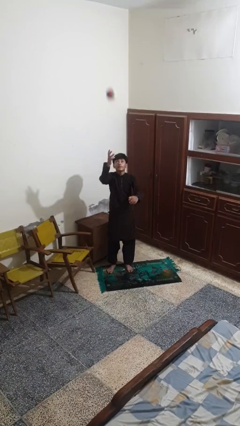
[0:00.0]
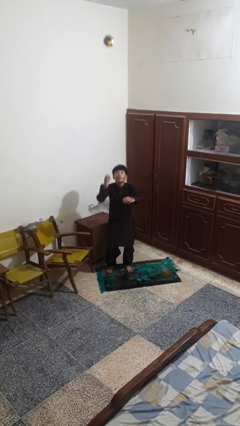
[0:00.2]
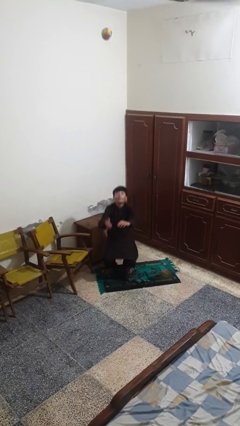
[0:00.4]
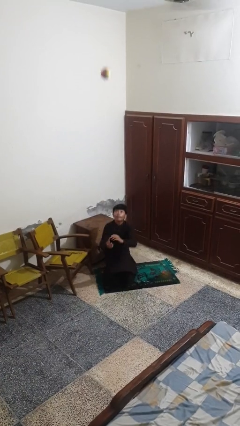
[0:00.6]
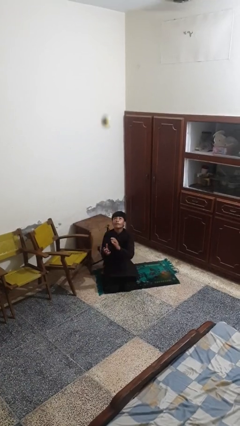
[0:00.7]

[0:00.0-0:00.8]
person drops object

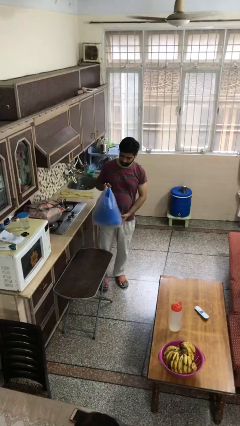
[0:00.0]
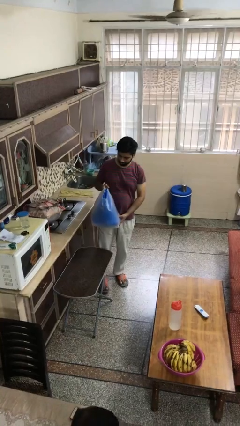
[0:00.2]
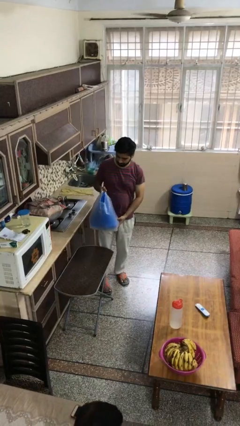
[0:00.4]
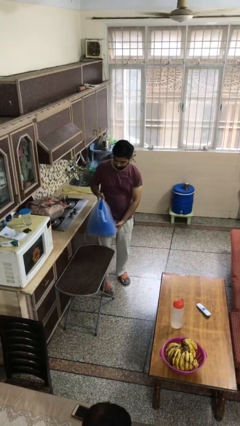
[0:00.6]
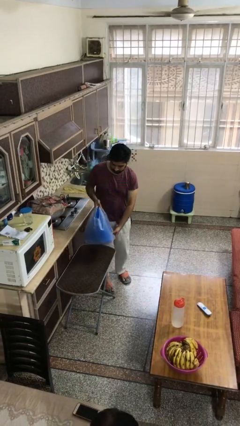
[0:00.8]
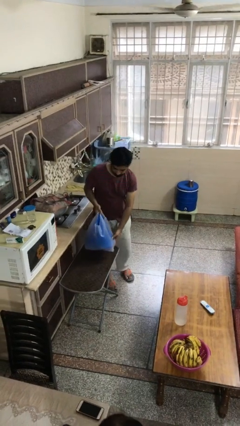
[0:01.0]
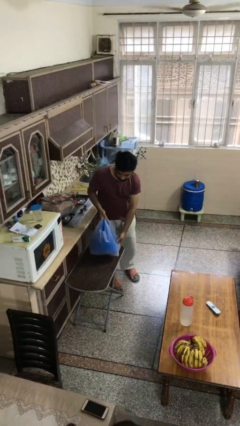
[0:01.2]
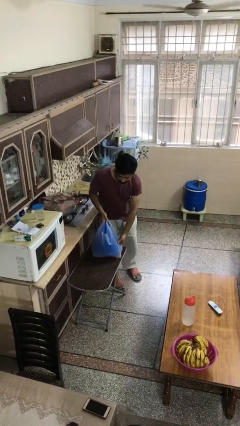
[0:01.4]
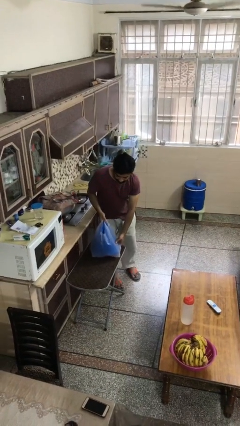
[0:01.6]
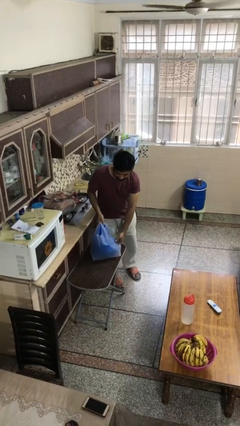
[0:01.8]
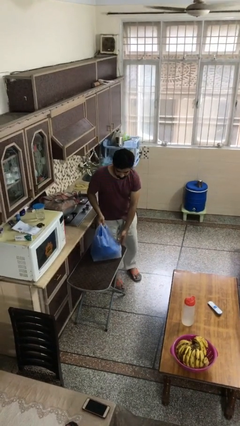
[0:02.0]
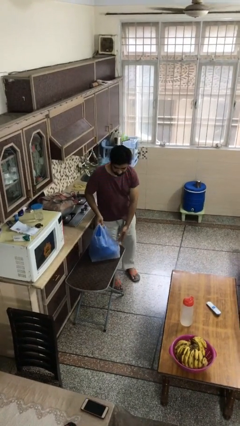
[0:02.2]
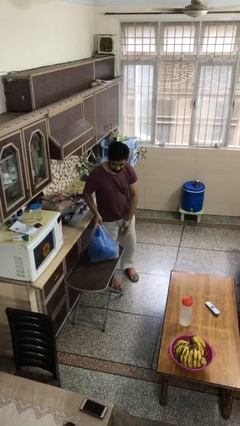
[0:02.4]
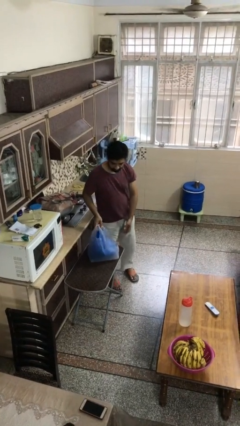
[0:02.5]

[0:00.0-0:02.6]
person puts down object on table

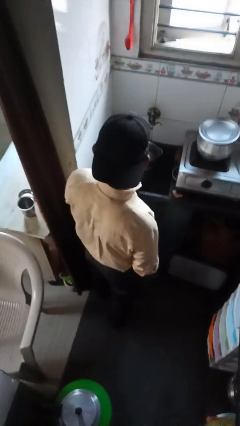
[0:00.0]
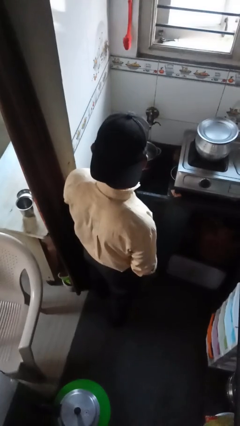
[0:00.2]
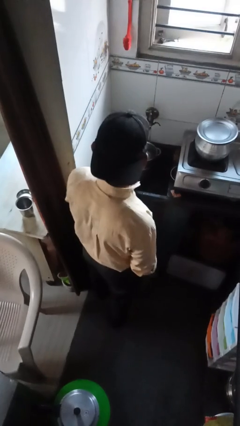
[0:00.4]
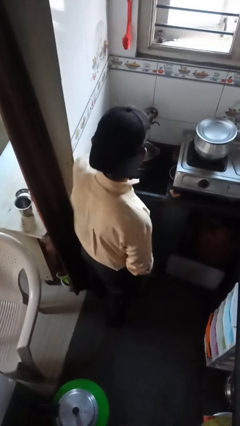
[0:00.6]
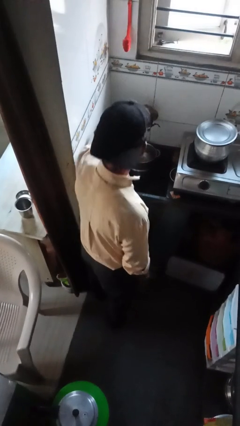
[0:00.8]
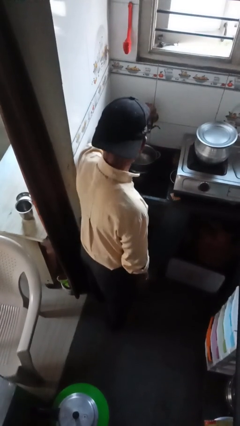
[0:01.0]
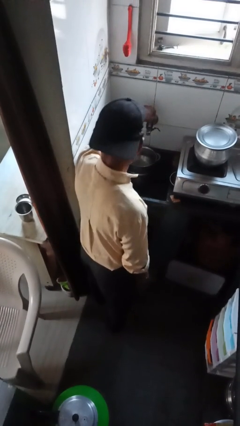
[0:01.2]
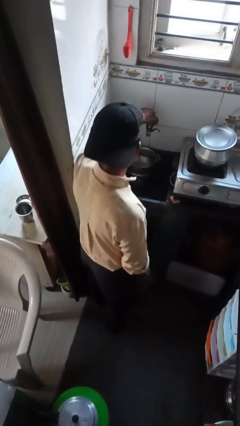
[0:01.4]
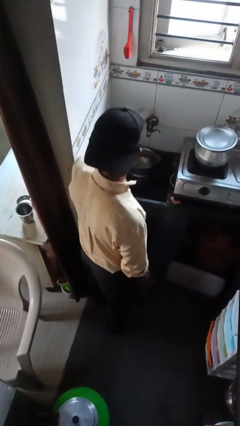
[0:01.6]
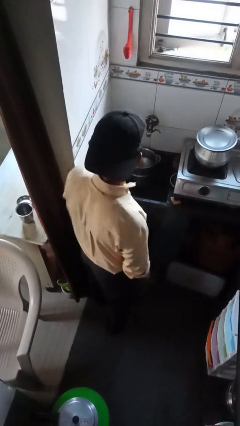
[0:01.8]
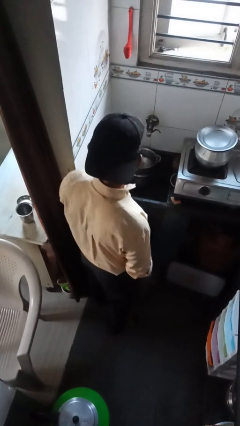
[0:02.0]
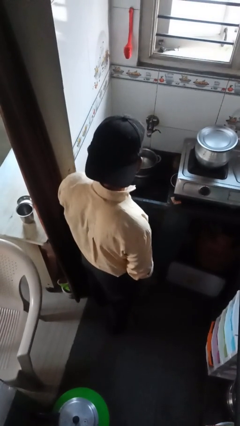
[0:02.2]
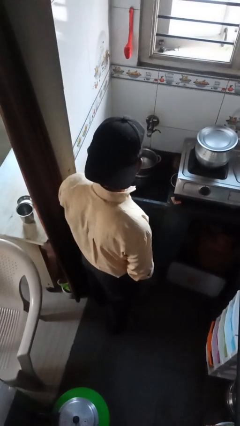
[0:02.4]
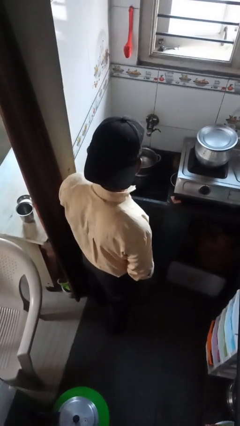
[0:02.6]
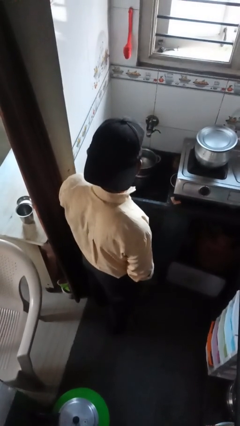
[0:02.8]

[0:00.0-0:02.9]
person turns on faucet

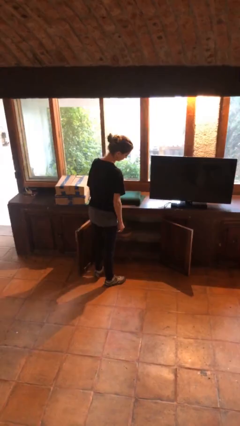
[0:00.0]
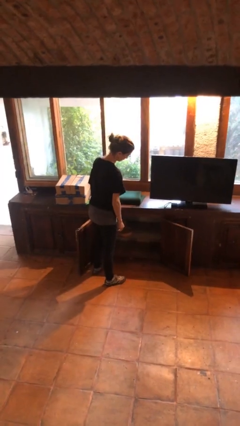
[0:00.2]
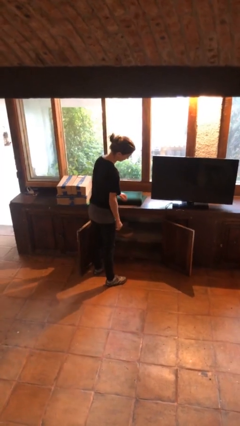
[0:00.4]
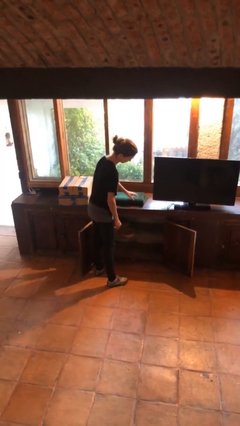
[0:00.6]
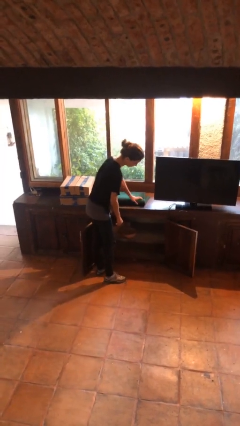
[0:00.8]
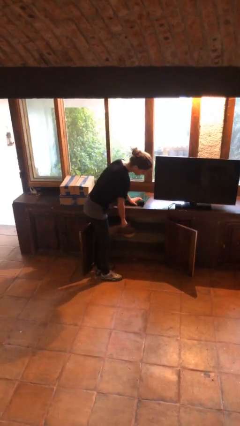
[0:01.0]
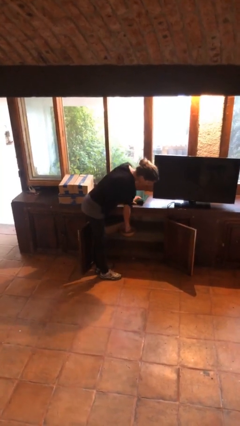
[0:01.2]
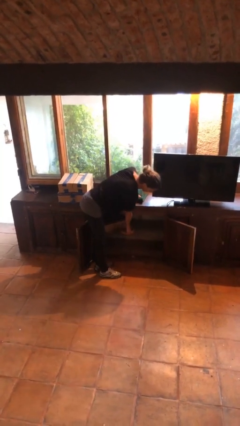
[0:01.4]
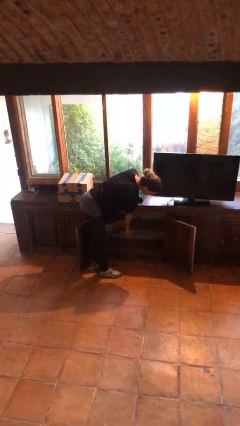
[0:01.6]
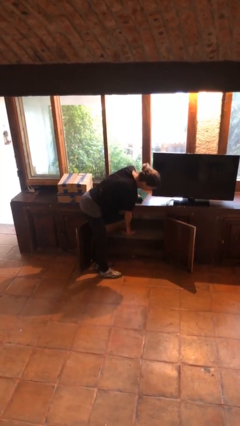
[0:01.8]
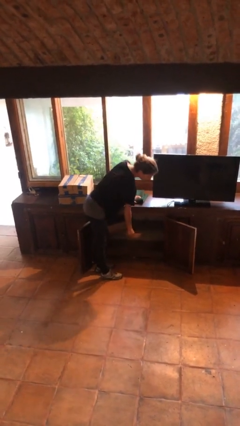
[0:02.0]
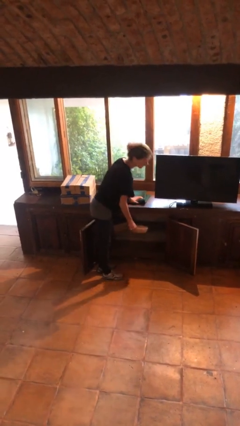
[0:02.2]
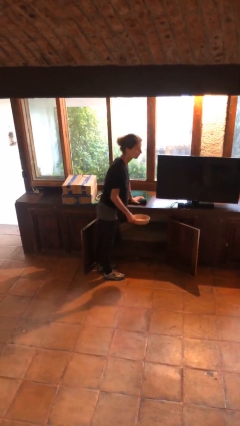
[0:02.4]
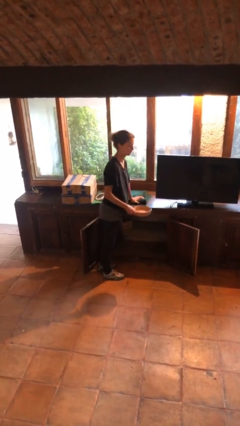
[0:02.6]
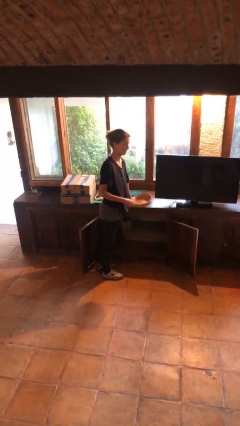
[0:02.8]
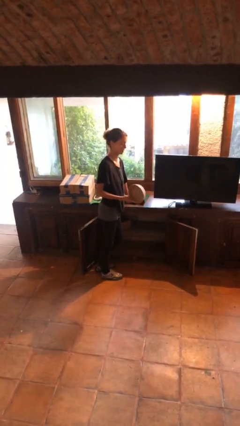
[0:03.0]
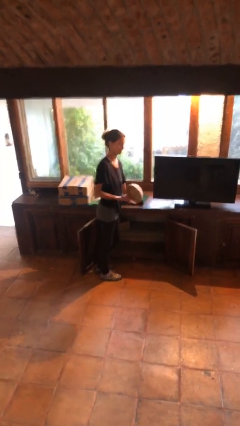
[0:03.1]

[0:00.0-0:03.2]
person picks up object from cabinet

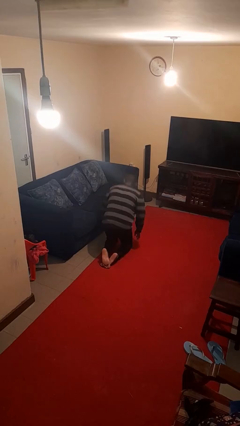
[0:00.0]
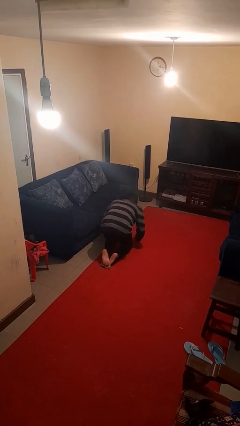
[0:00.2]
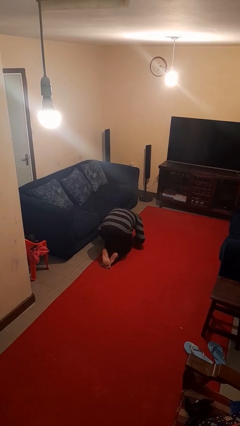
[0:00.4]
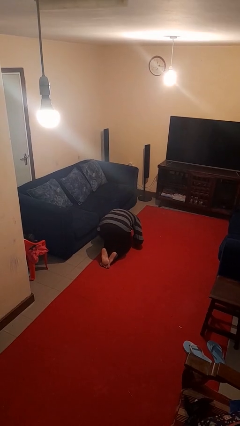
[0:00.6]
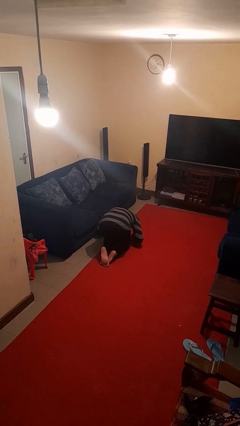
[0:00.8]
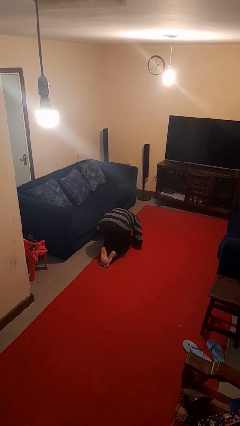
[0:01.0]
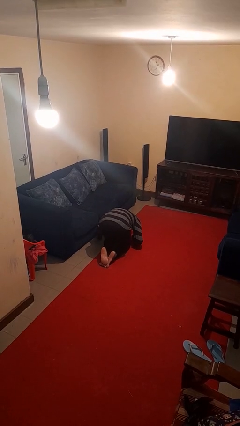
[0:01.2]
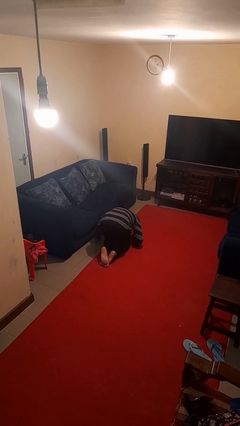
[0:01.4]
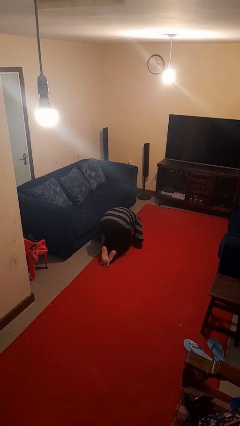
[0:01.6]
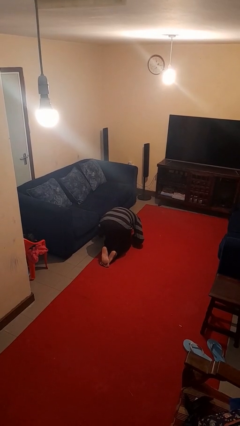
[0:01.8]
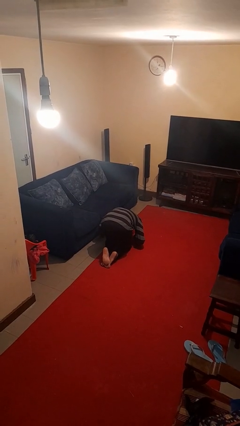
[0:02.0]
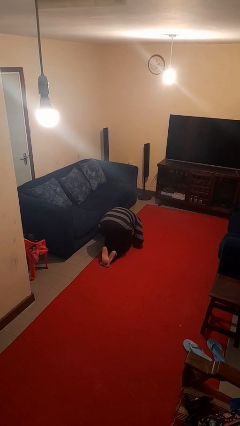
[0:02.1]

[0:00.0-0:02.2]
person searches under couch

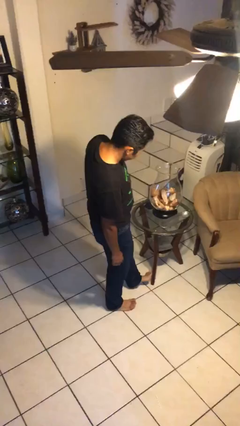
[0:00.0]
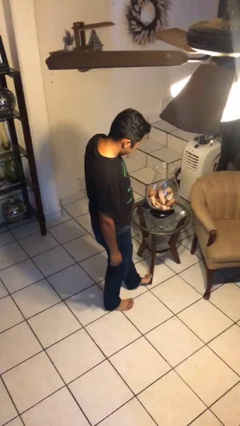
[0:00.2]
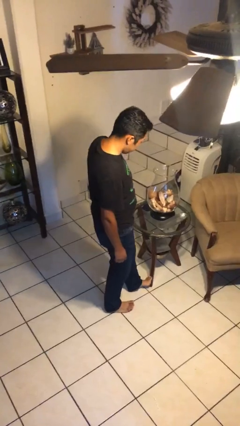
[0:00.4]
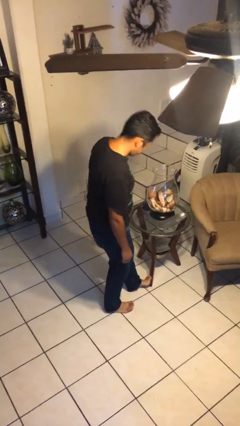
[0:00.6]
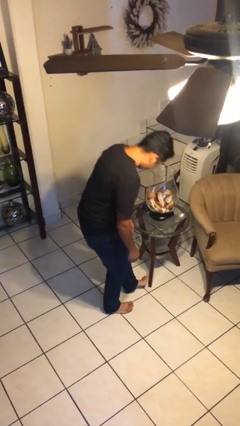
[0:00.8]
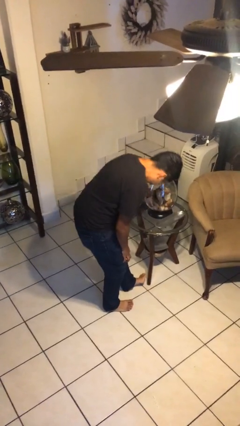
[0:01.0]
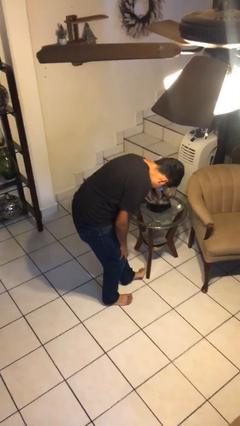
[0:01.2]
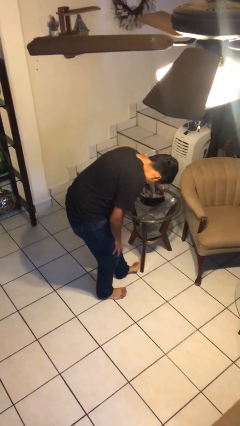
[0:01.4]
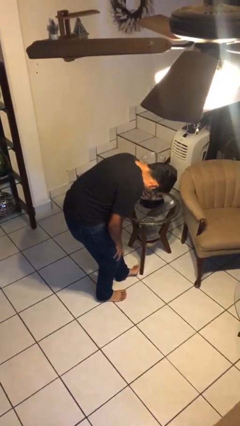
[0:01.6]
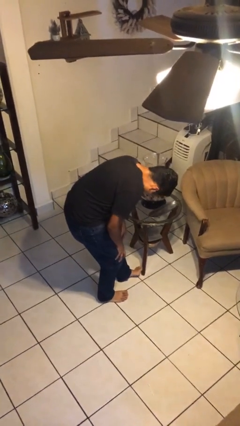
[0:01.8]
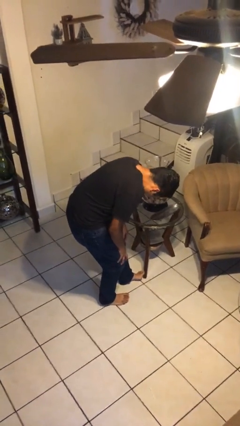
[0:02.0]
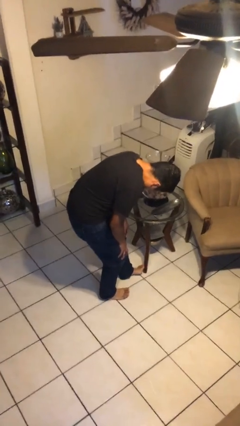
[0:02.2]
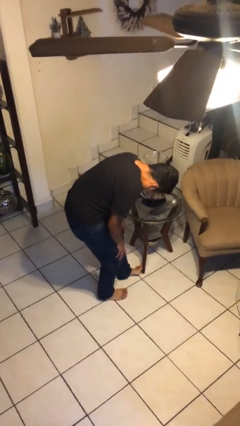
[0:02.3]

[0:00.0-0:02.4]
person stubs toe

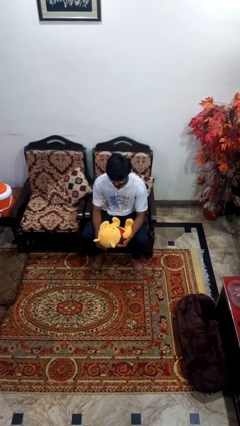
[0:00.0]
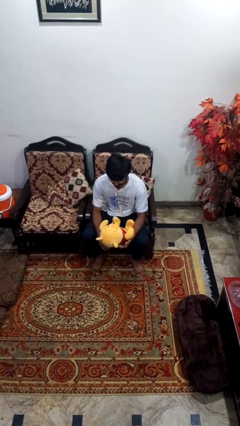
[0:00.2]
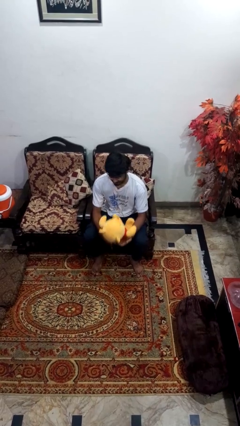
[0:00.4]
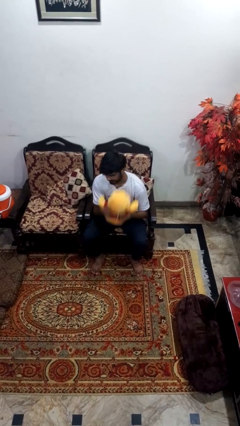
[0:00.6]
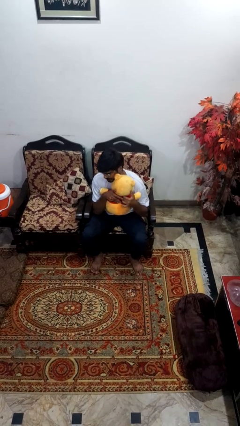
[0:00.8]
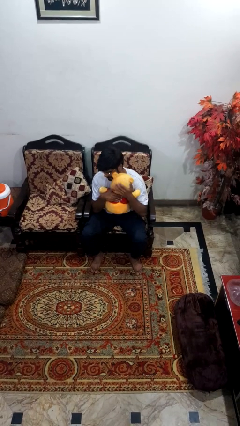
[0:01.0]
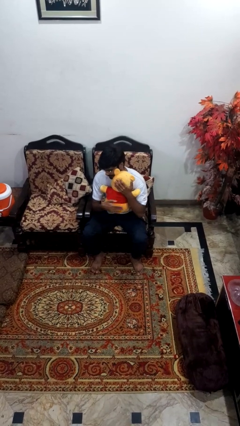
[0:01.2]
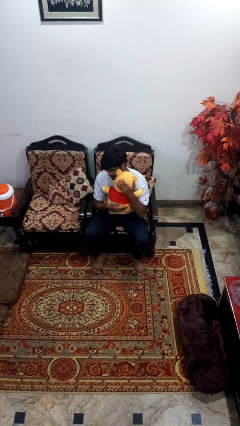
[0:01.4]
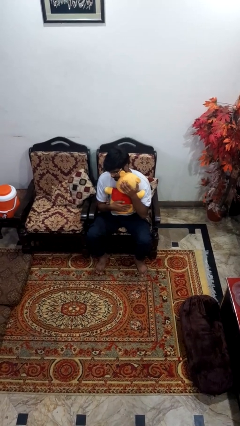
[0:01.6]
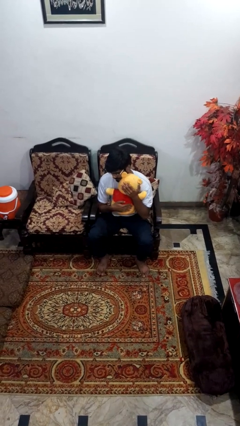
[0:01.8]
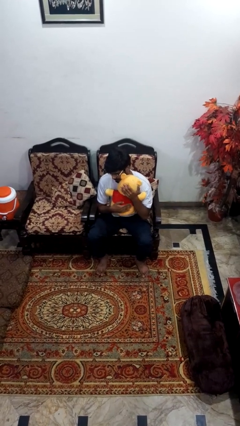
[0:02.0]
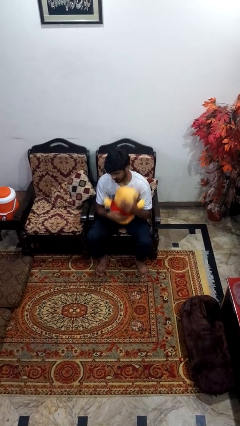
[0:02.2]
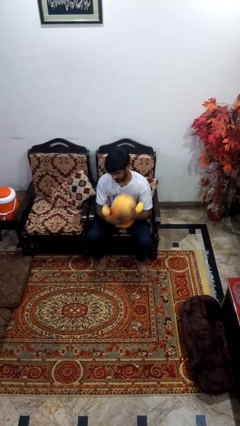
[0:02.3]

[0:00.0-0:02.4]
person hugs stuffed animal

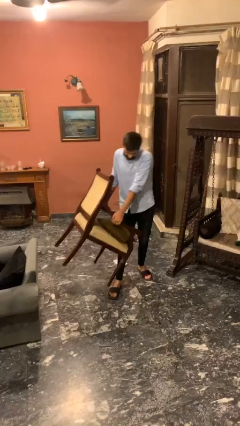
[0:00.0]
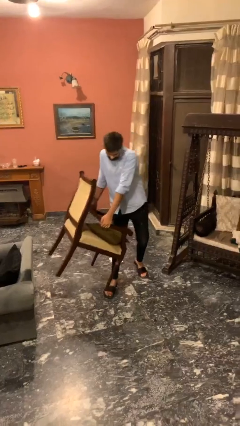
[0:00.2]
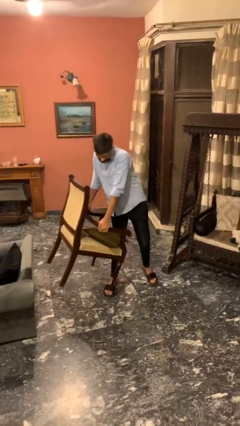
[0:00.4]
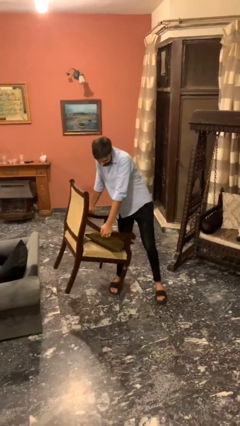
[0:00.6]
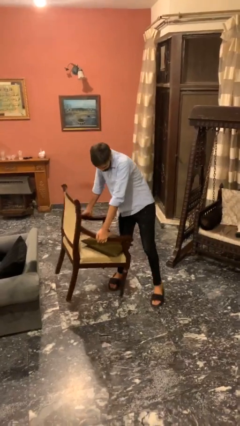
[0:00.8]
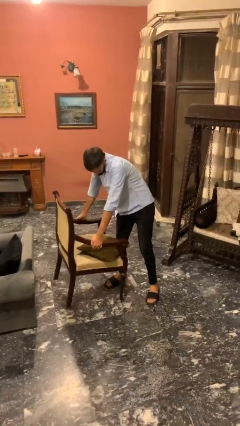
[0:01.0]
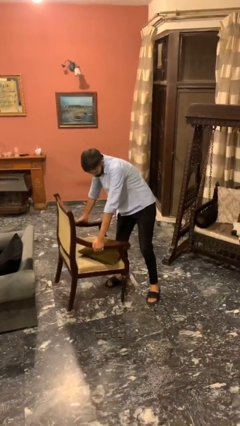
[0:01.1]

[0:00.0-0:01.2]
person puts down object on floor
